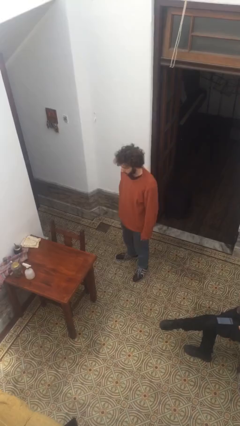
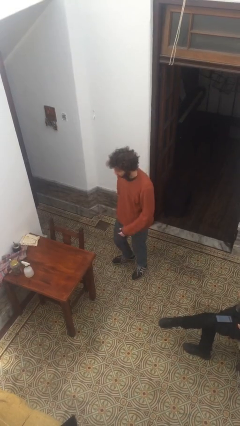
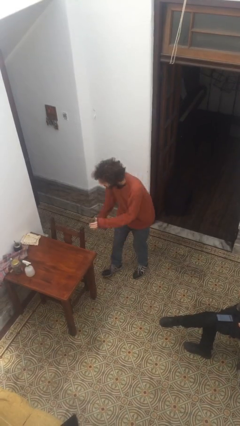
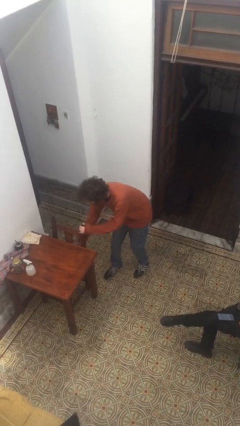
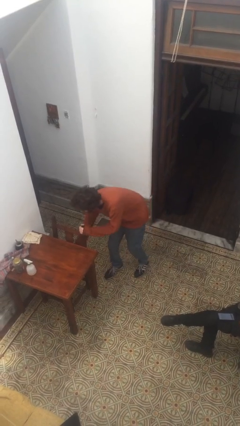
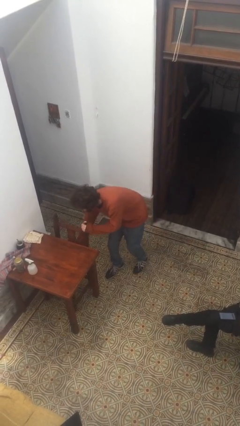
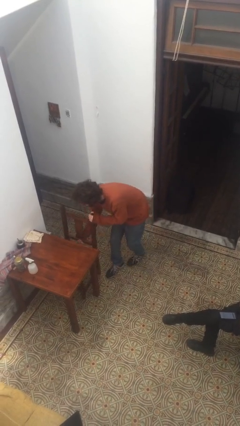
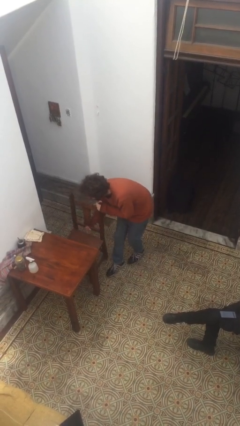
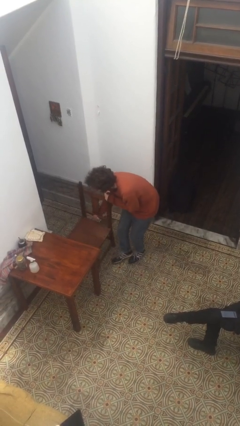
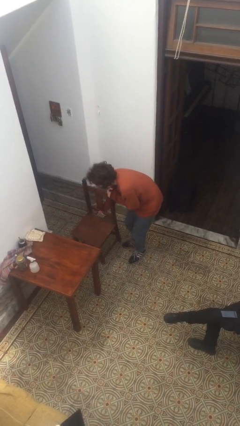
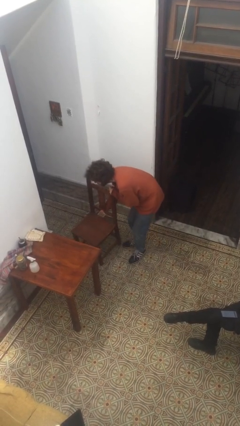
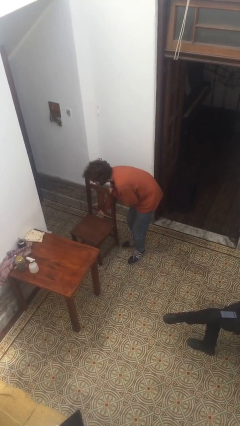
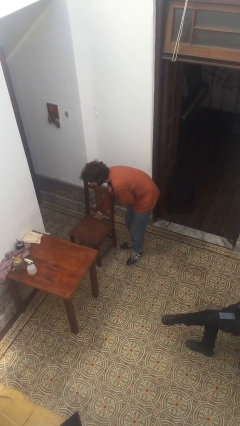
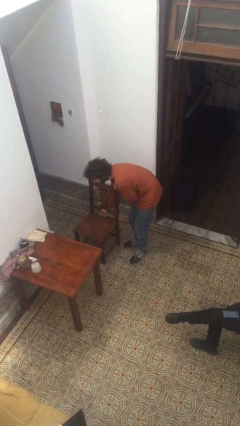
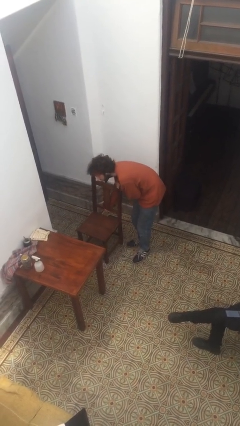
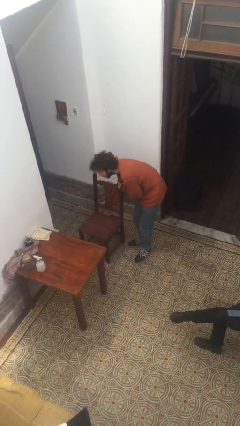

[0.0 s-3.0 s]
person pulls out chair

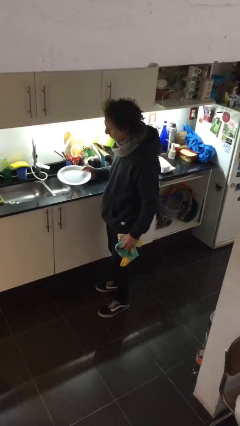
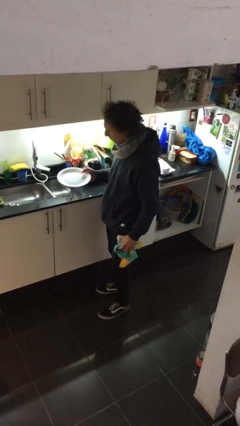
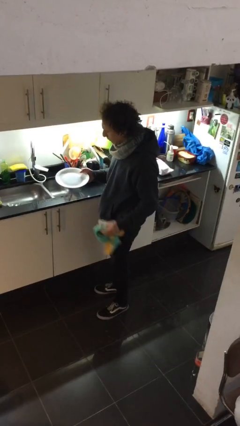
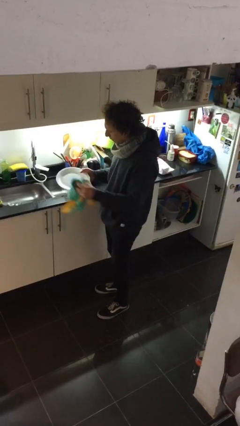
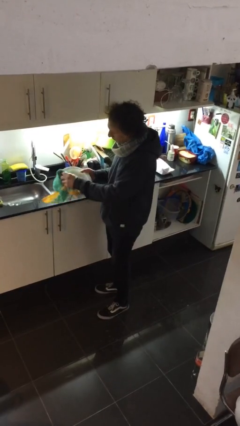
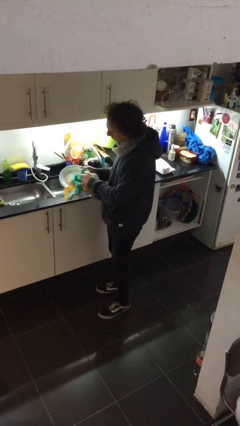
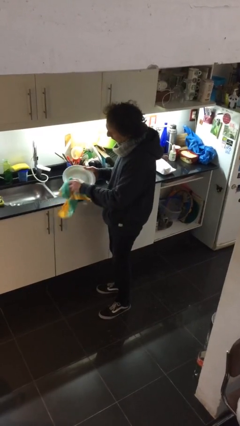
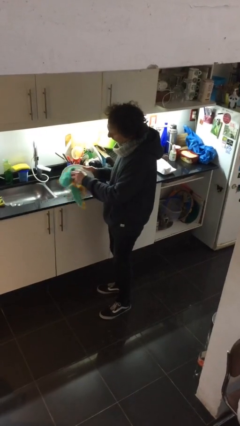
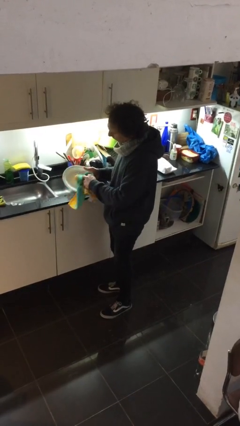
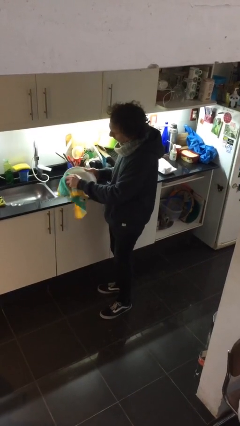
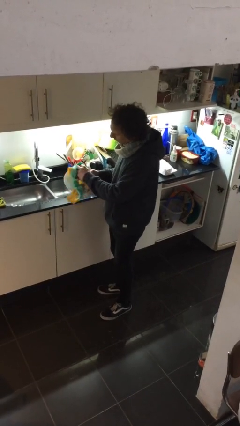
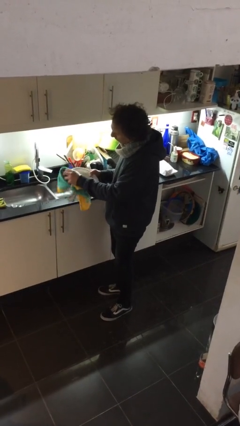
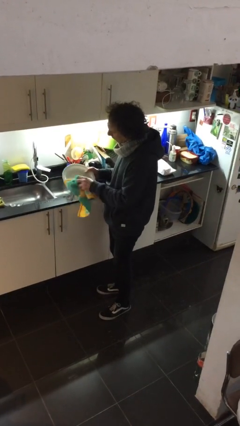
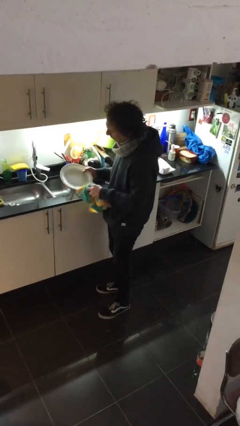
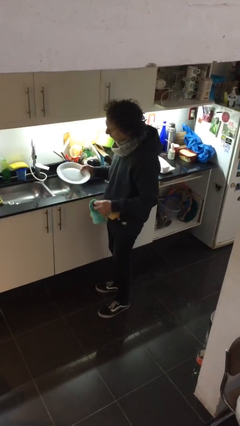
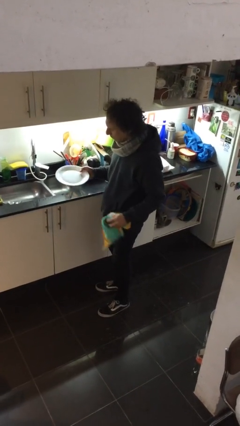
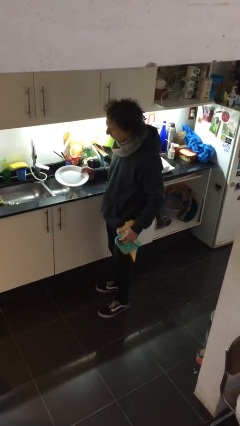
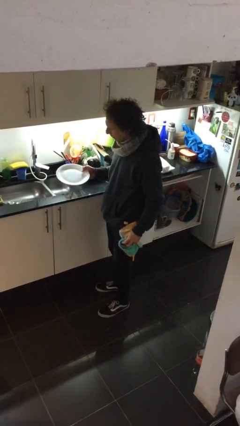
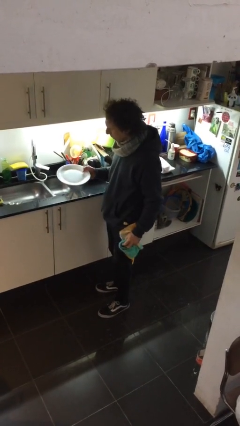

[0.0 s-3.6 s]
person dries dish

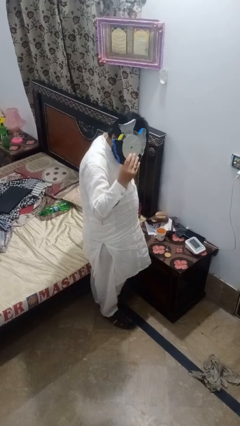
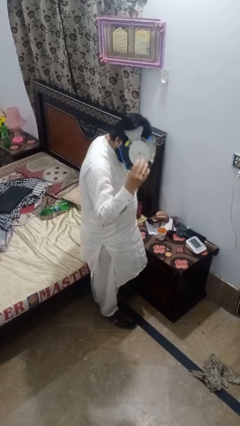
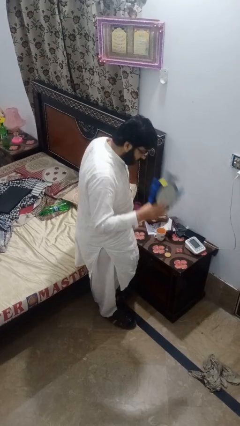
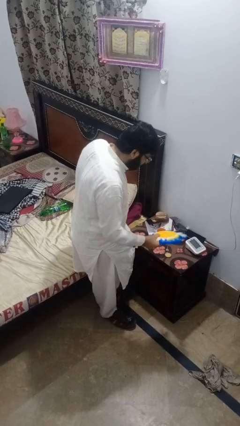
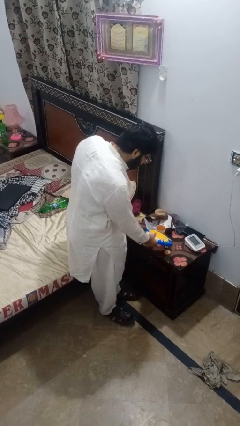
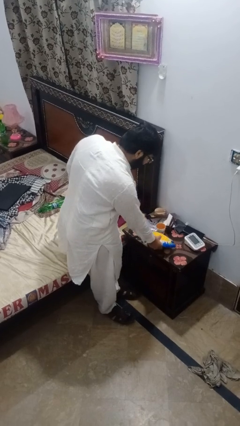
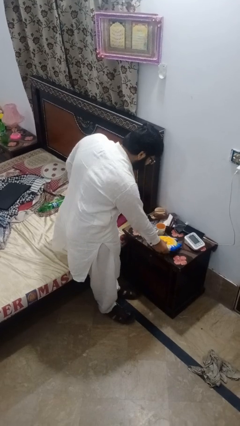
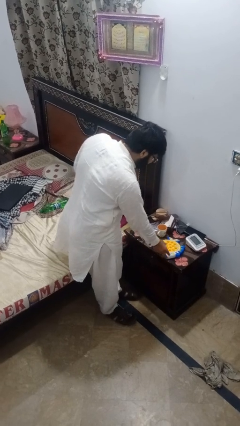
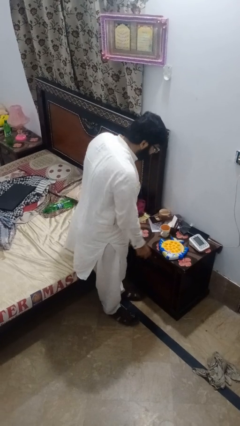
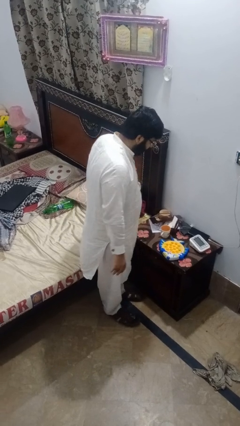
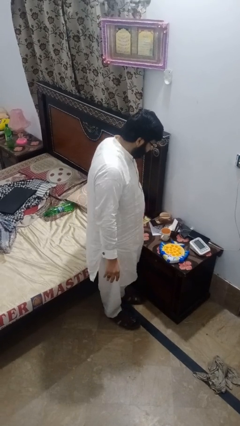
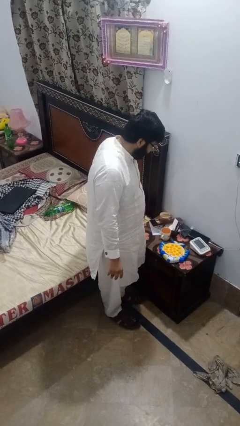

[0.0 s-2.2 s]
person puts down object on countertop

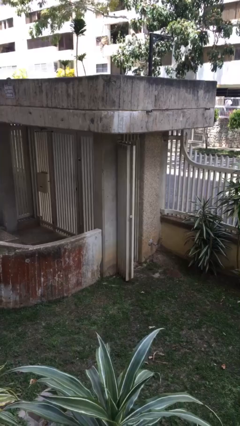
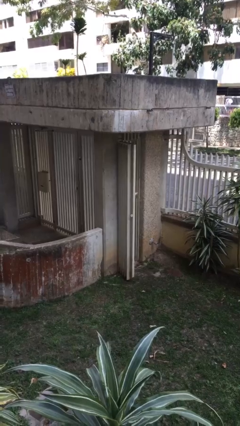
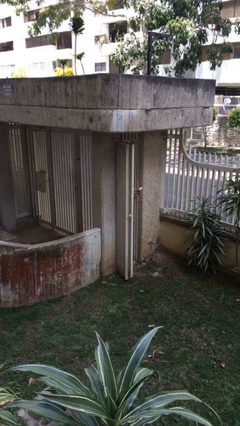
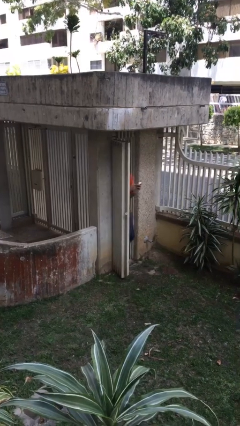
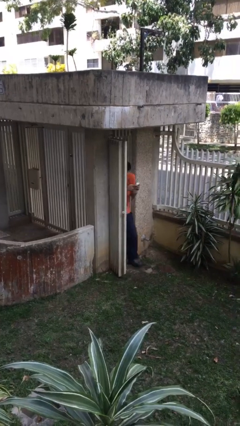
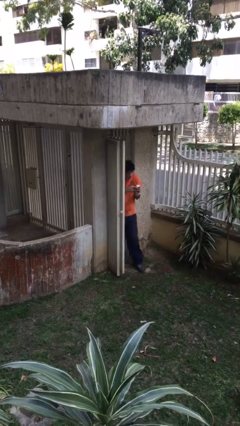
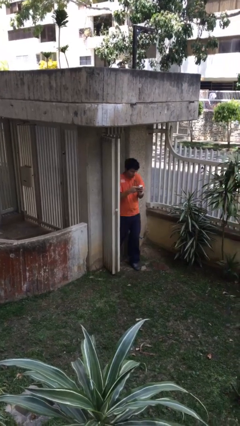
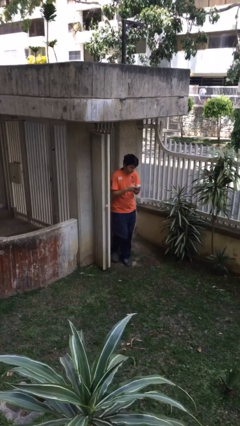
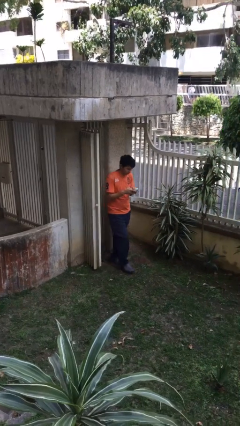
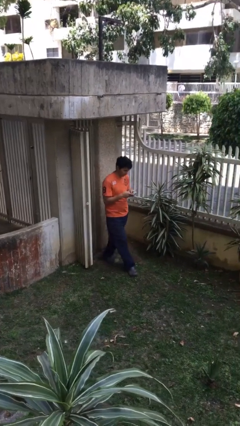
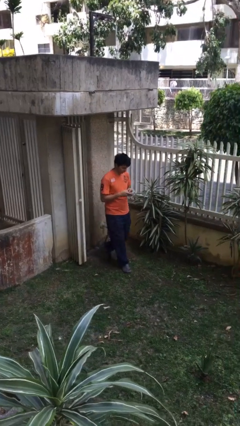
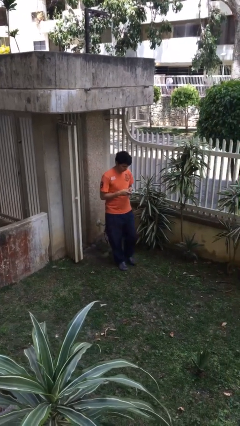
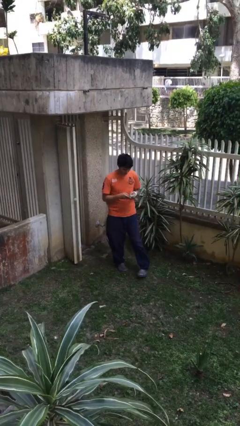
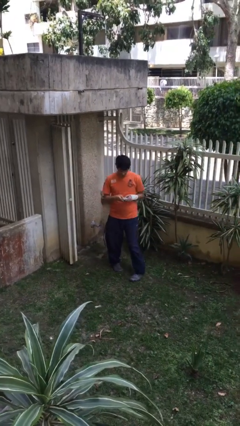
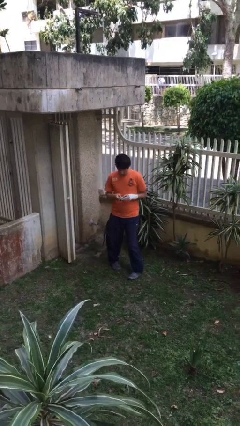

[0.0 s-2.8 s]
person enters scene through structure

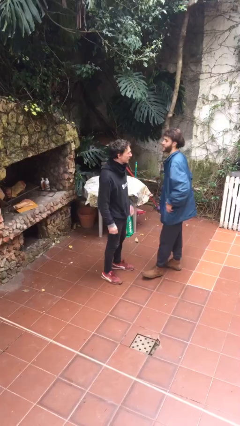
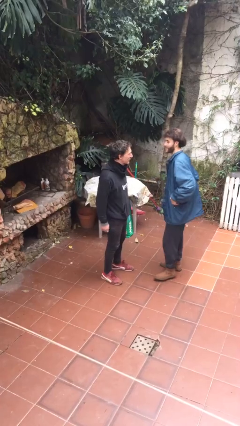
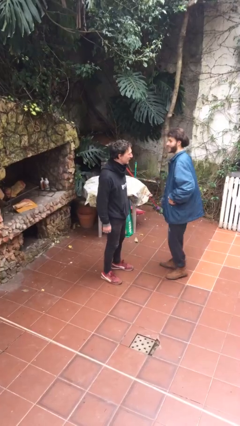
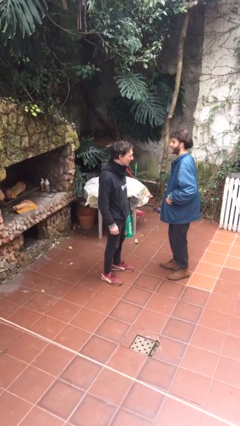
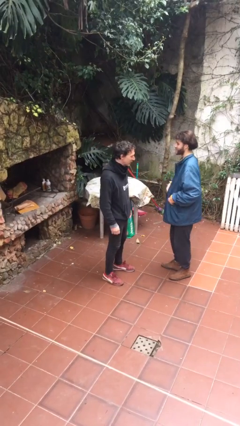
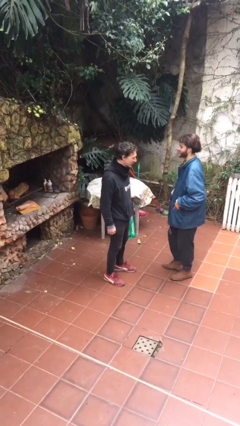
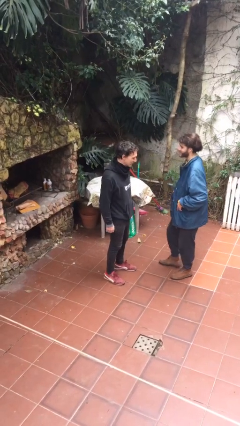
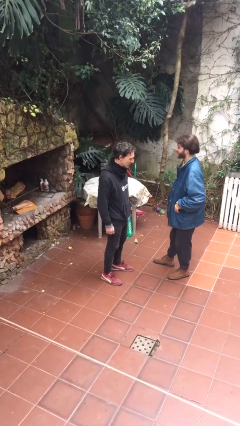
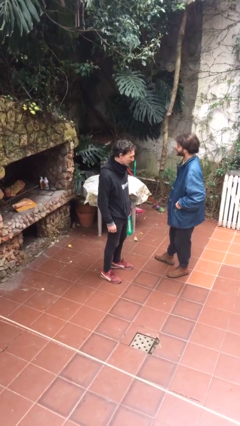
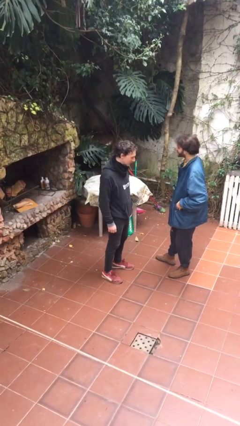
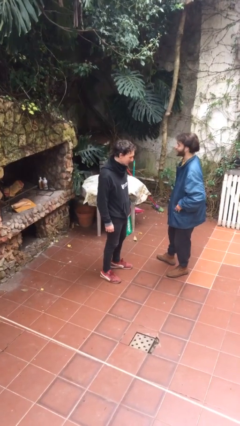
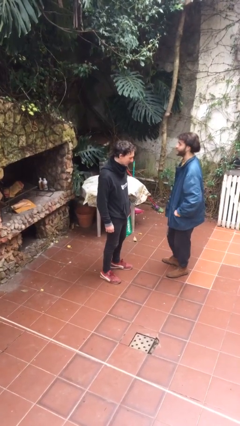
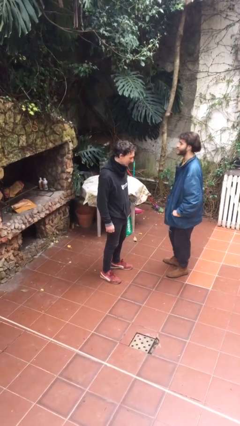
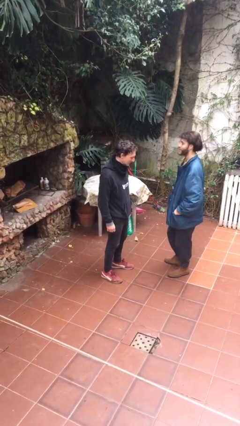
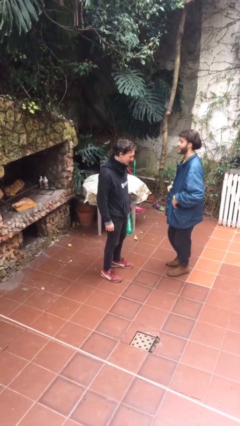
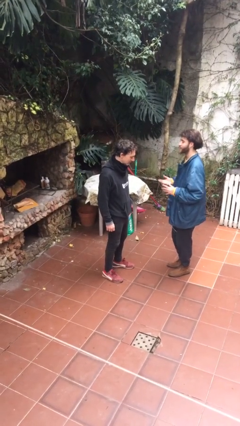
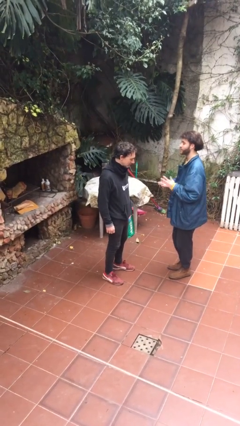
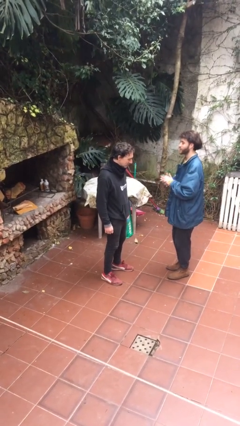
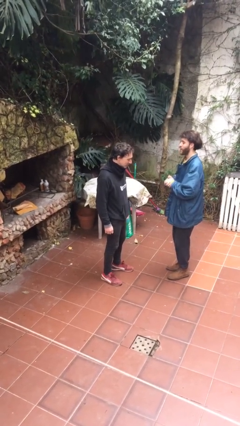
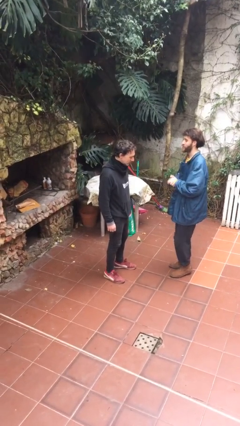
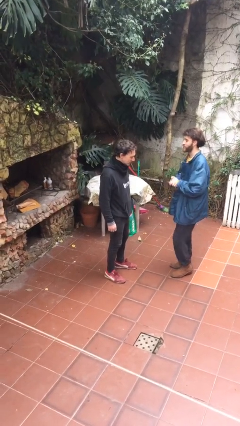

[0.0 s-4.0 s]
person talks to person

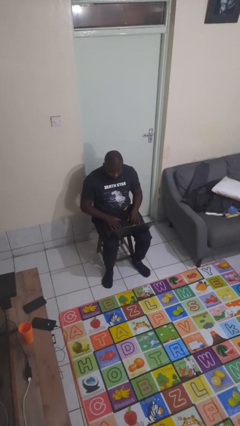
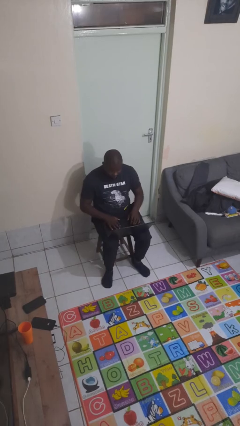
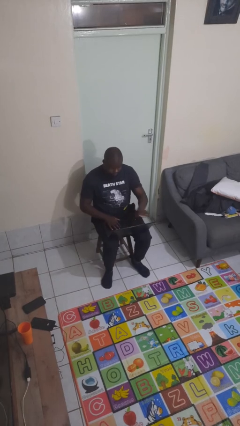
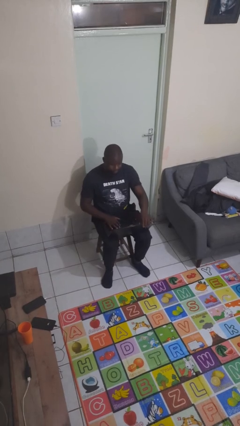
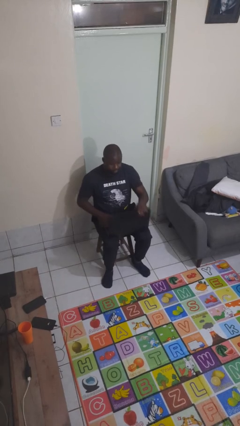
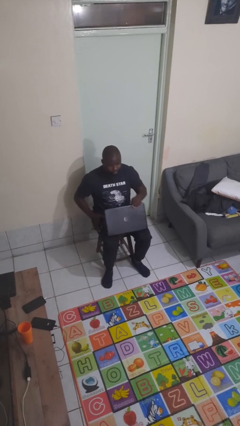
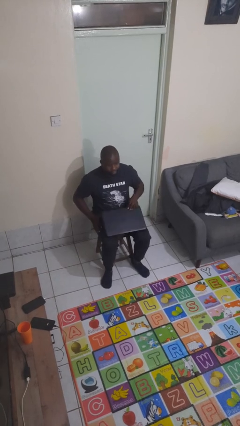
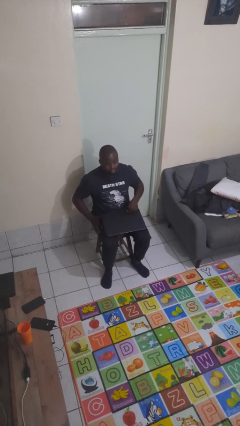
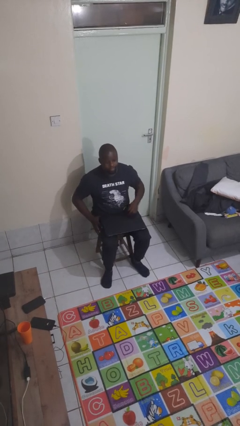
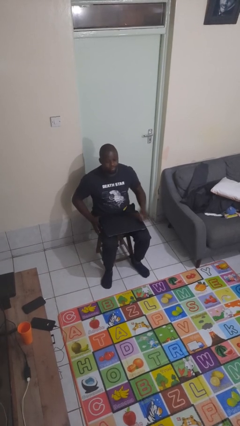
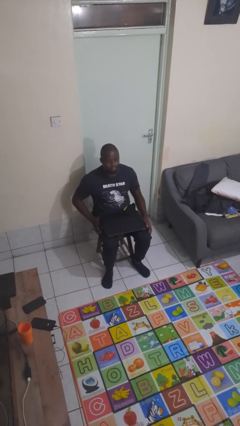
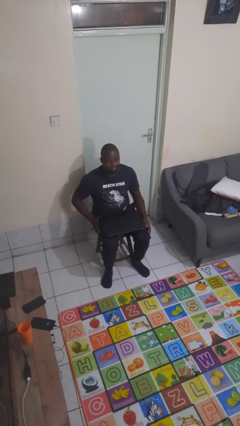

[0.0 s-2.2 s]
person closes laptop
